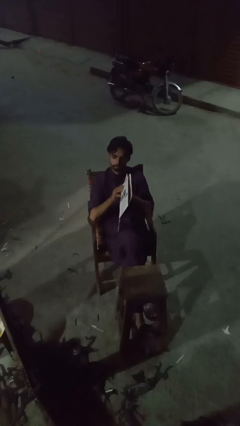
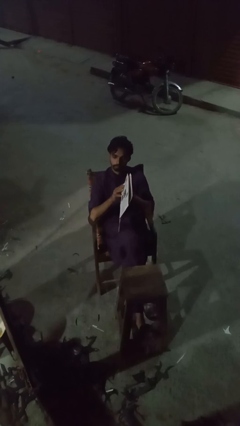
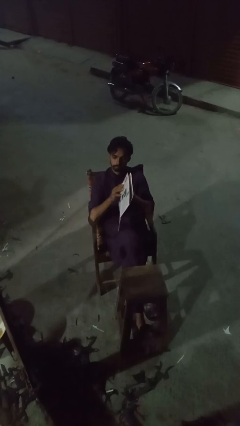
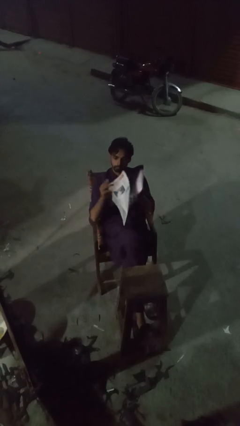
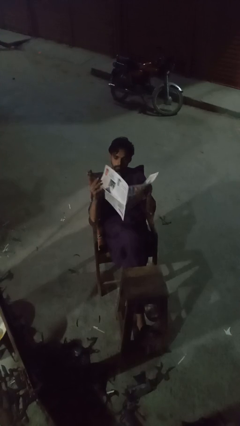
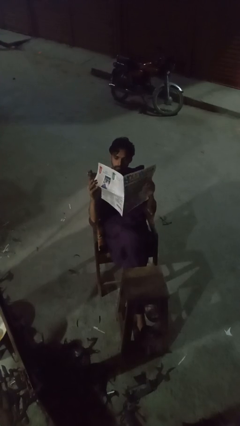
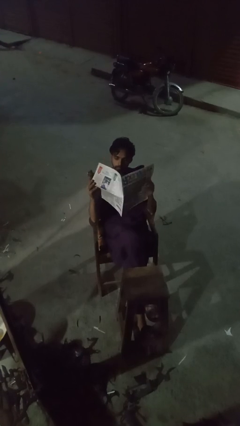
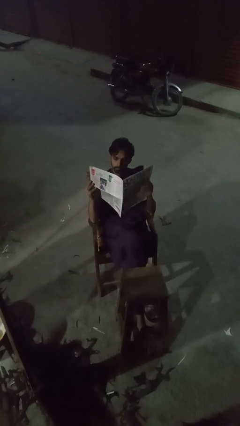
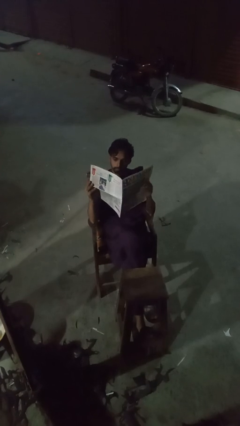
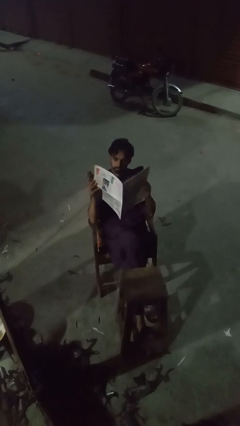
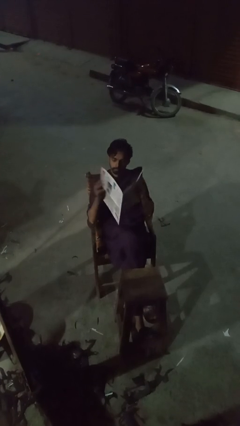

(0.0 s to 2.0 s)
person reads newspaper

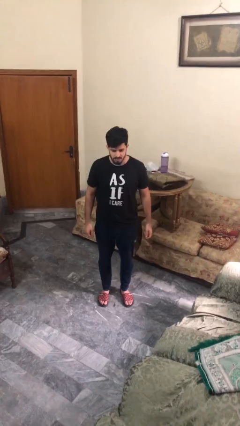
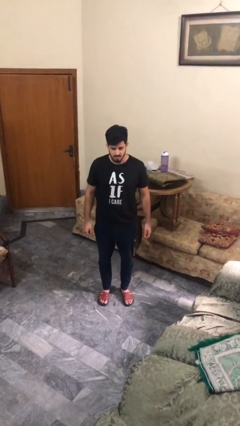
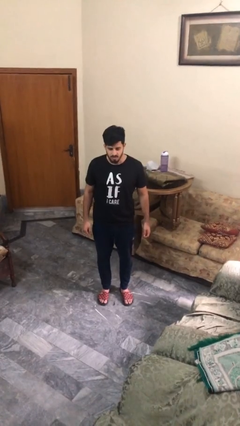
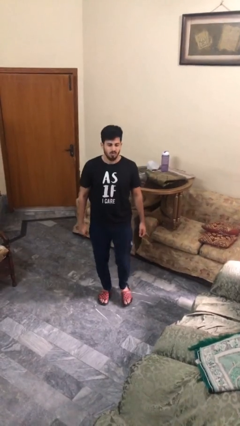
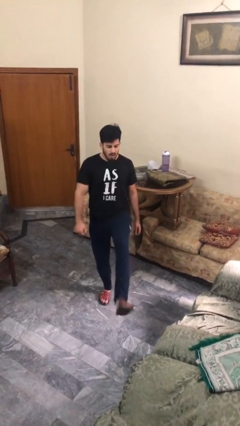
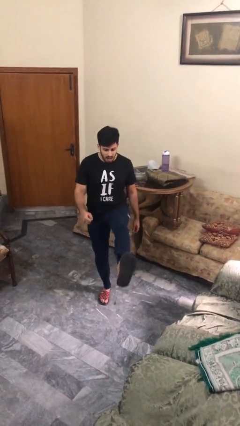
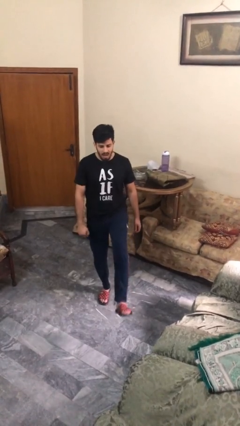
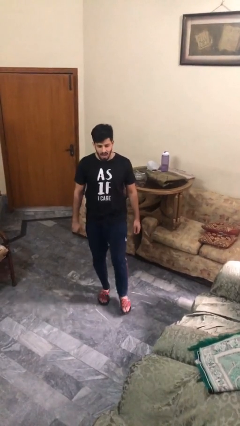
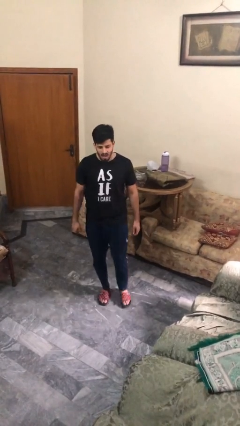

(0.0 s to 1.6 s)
person karate kicks

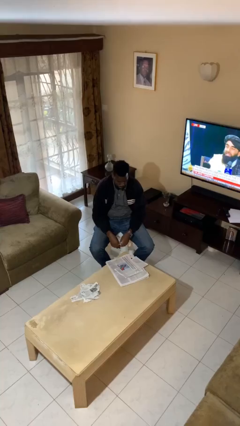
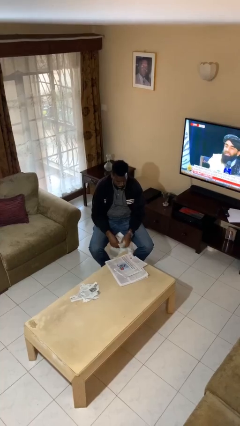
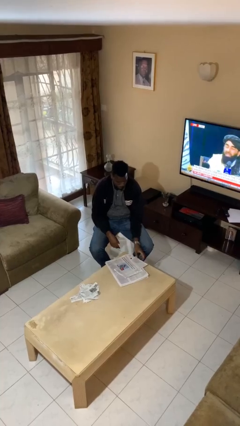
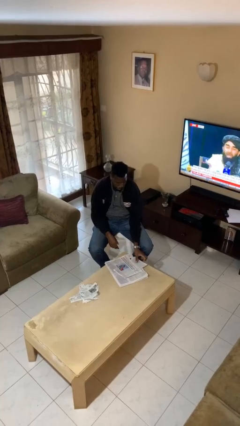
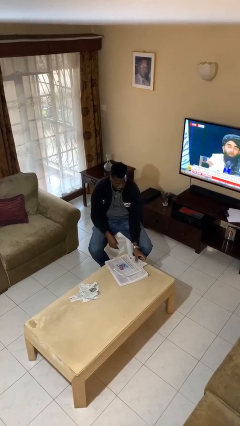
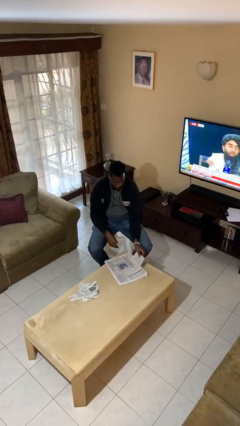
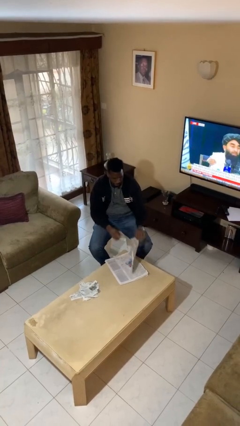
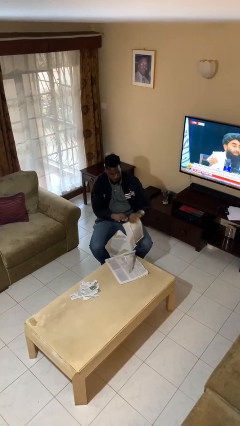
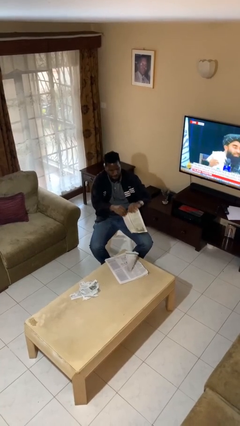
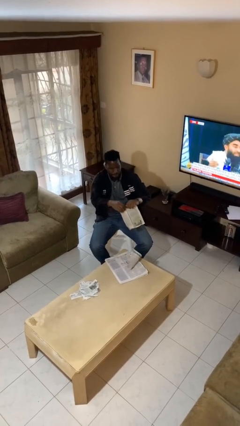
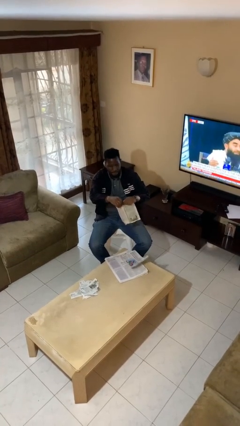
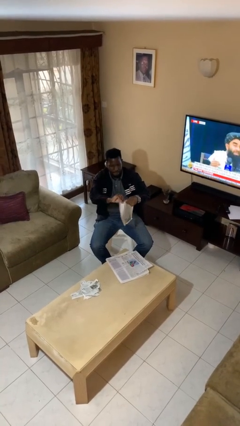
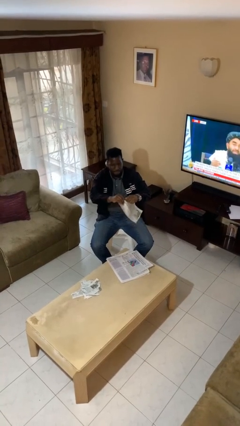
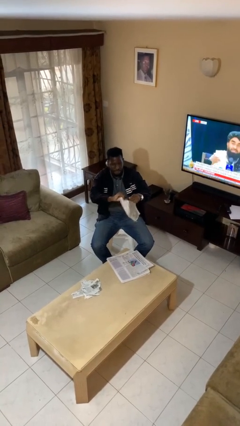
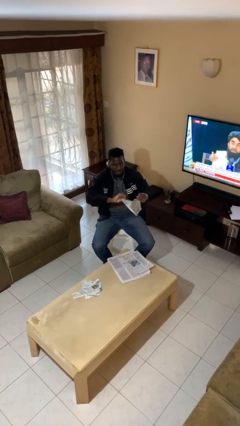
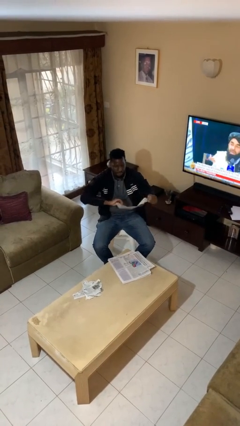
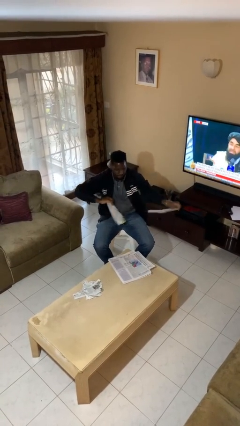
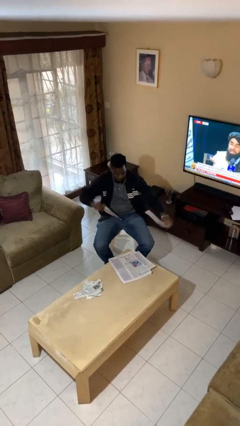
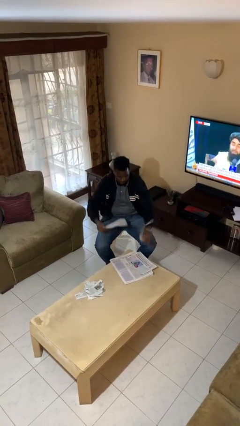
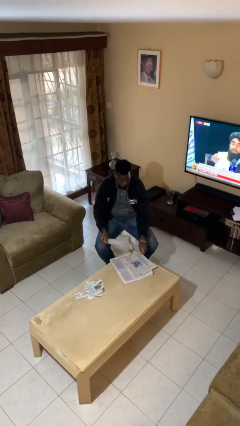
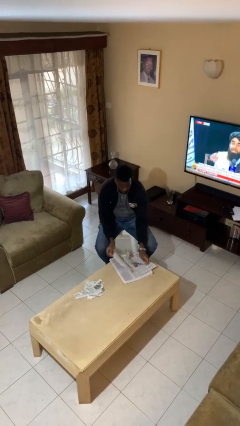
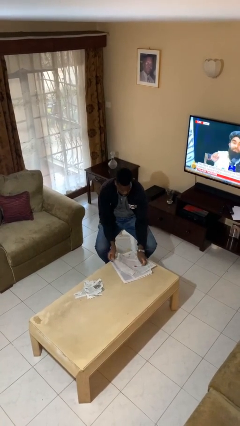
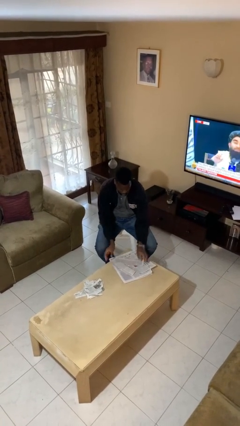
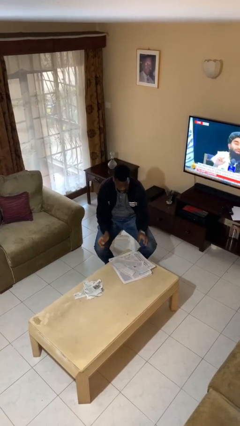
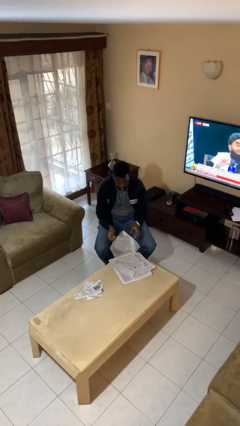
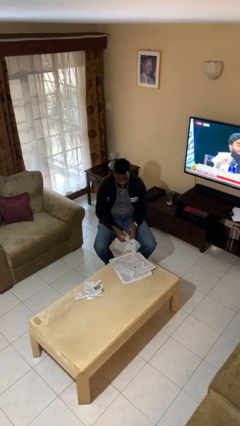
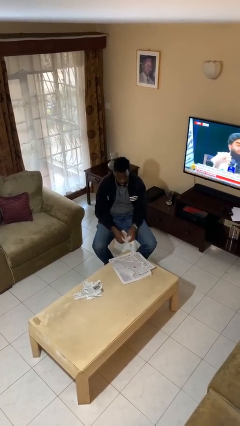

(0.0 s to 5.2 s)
person tears paper

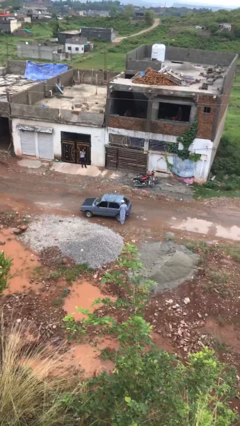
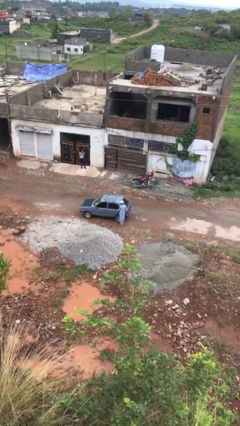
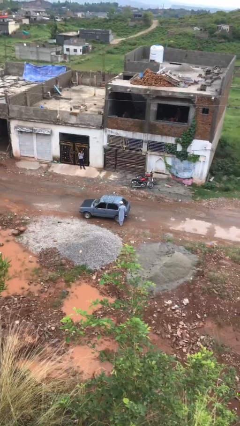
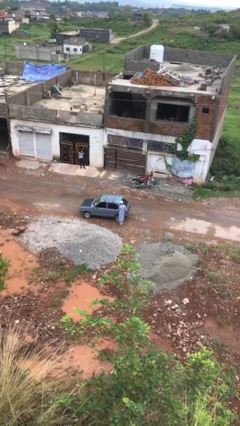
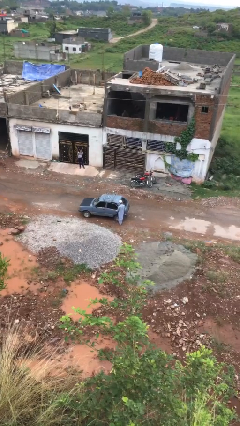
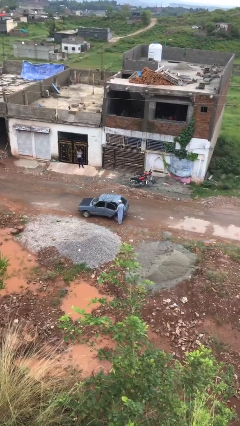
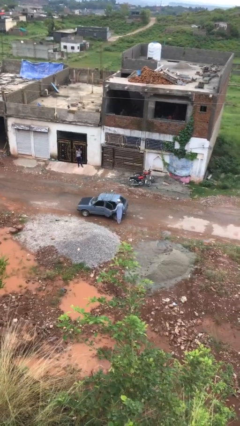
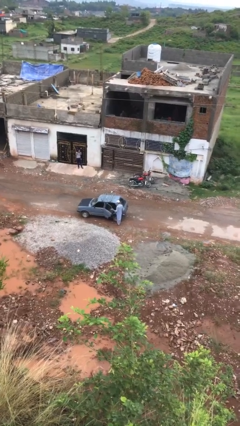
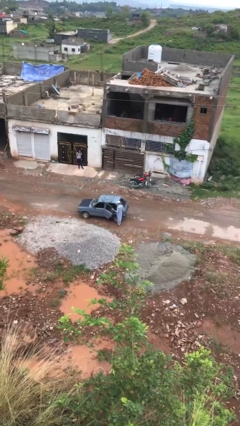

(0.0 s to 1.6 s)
person opens car door

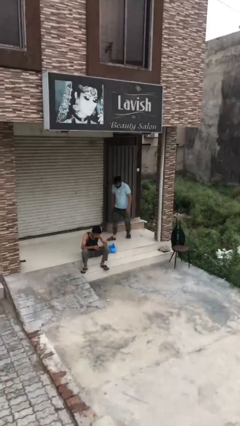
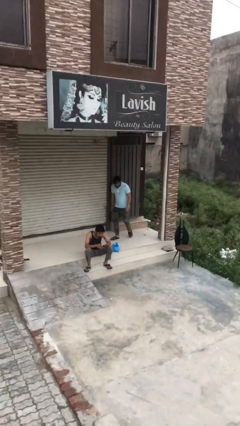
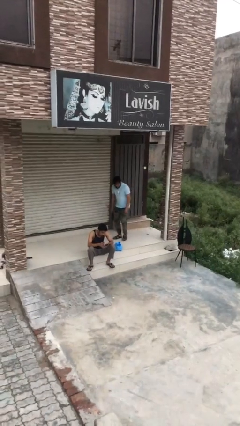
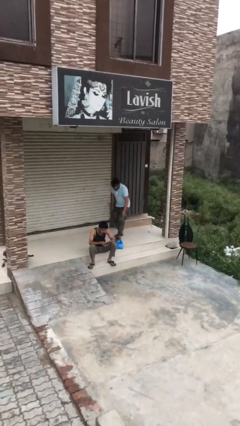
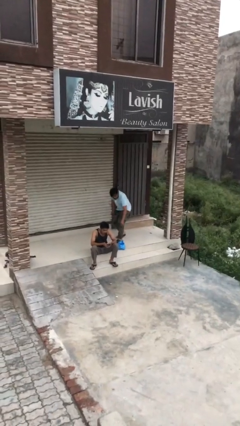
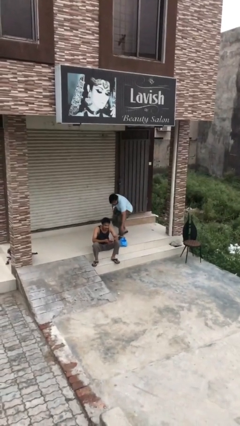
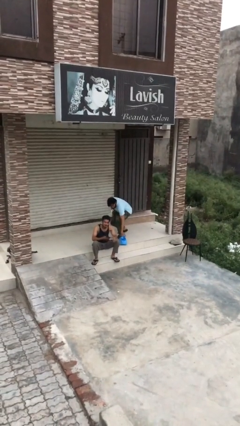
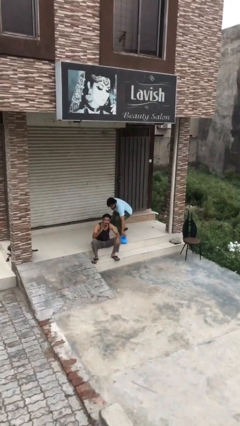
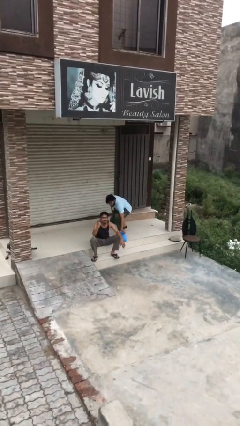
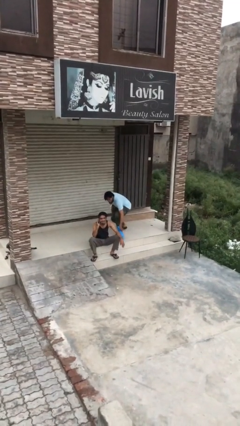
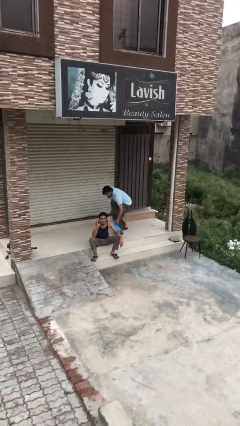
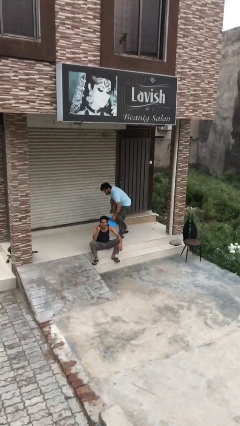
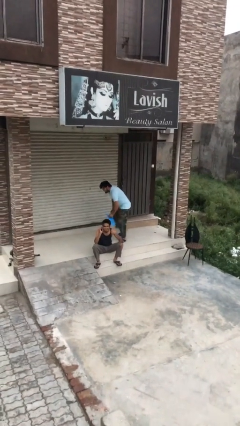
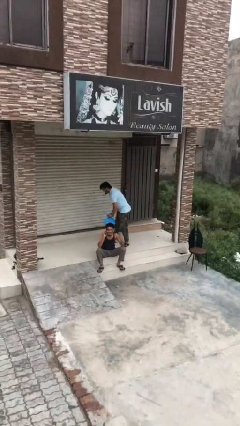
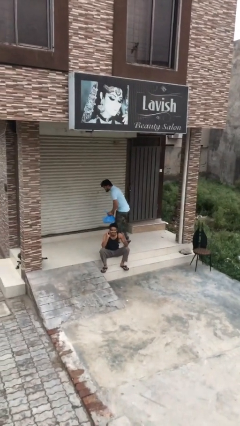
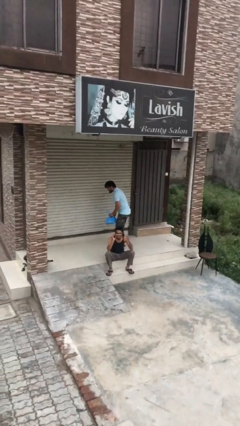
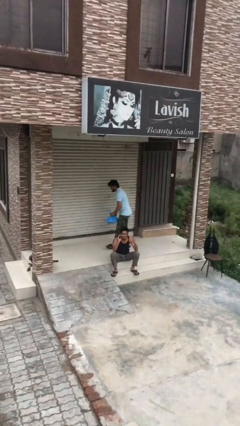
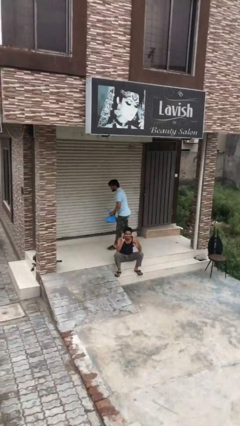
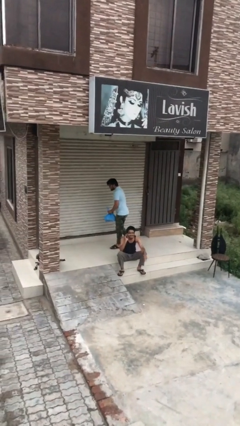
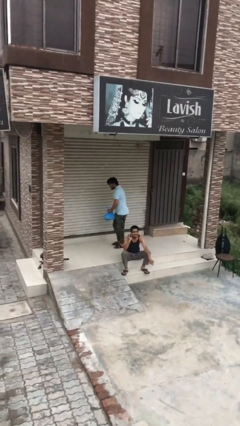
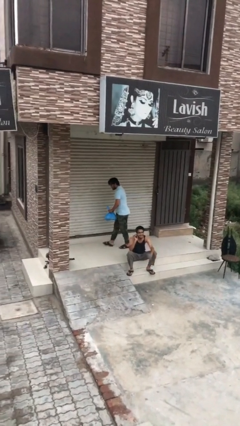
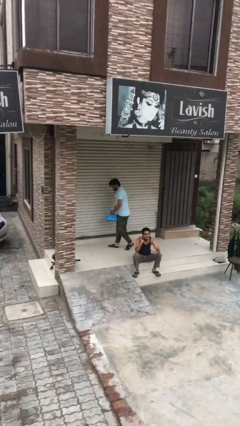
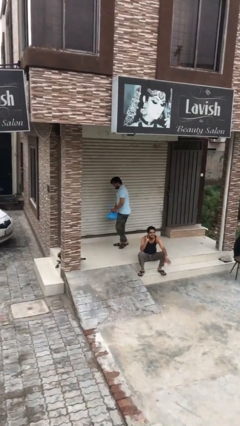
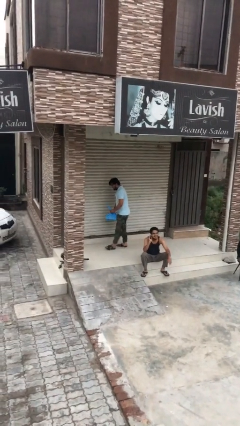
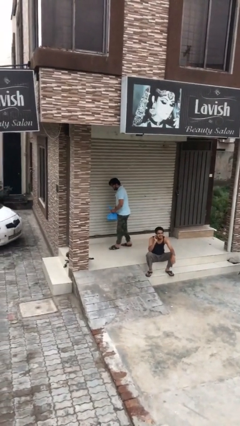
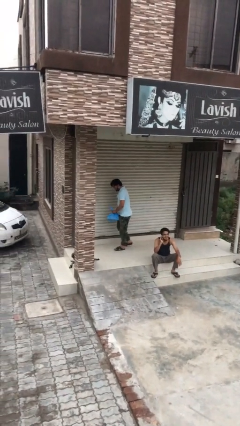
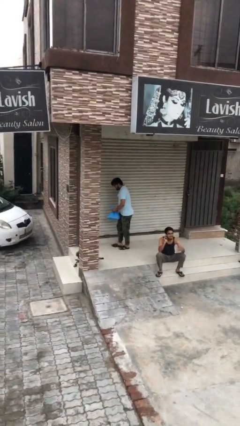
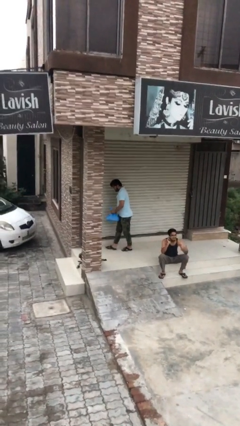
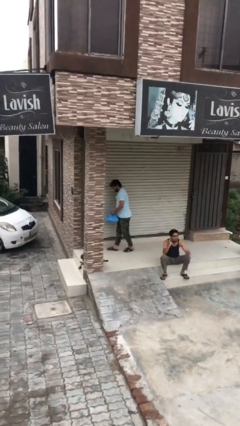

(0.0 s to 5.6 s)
person steals object from person

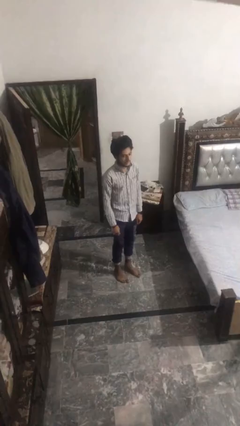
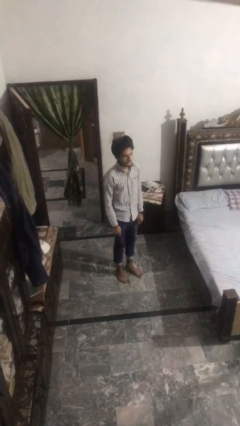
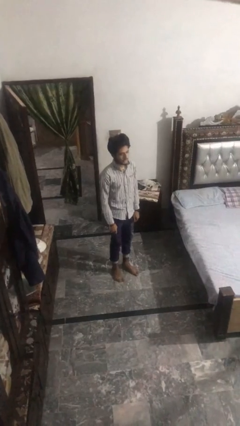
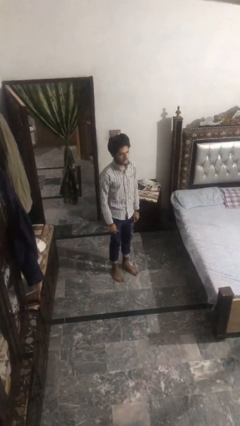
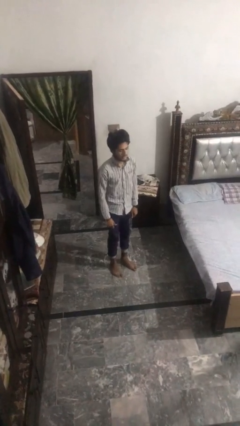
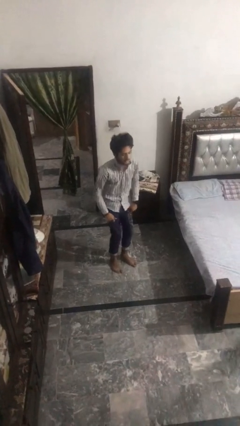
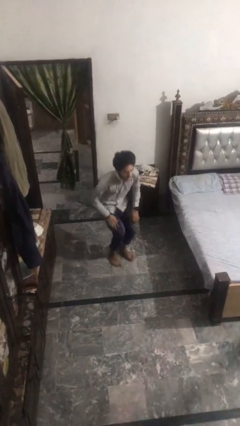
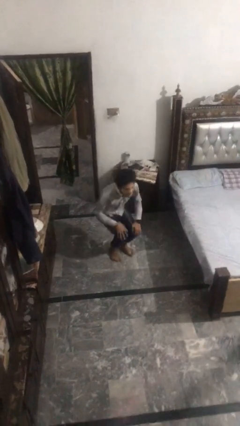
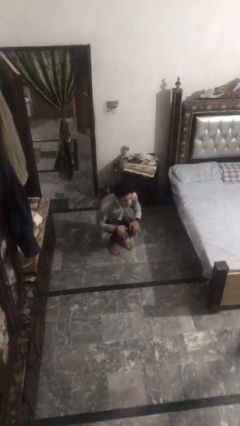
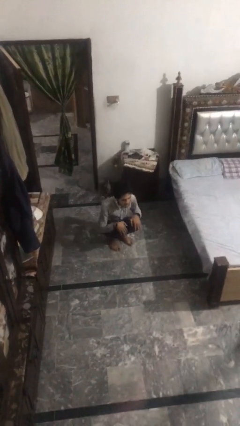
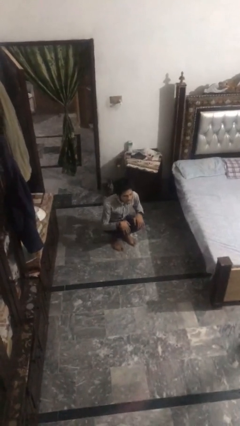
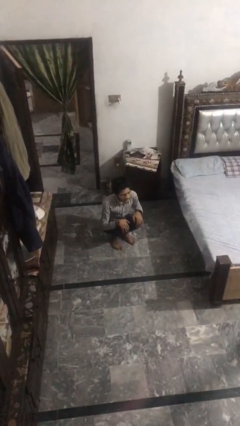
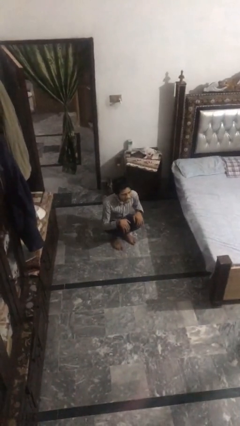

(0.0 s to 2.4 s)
person squats
